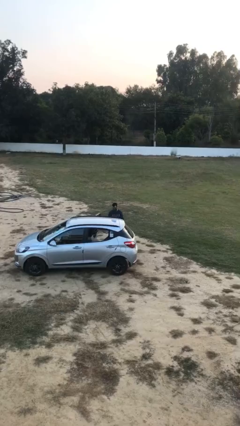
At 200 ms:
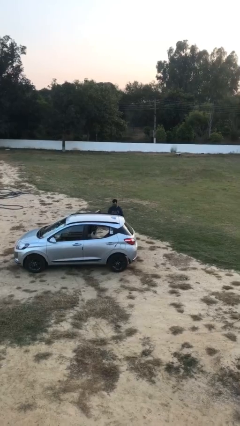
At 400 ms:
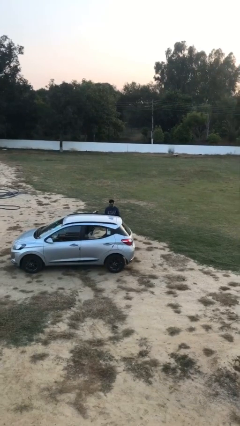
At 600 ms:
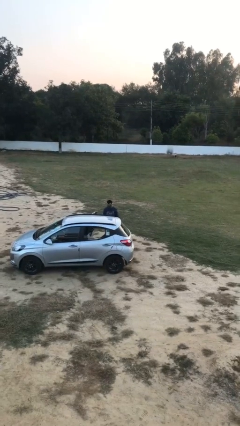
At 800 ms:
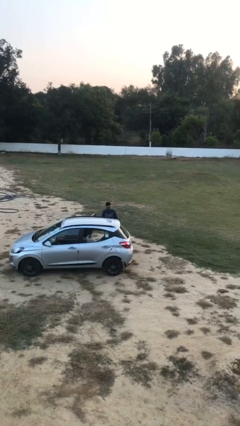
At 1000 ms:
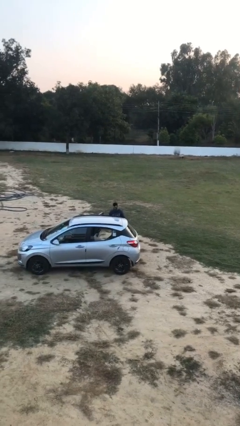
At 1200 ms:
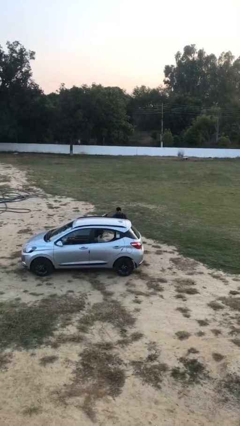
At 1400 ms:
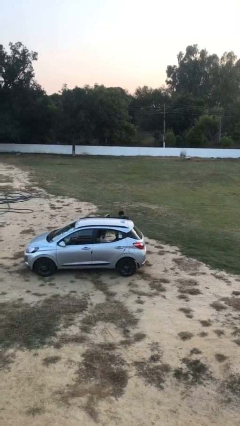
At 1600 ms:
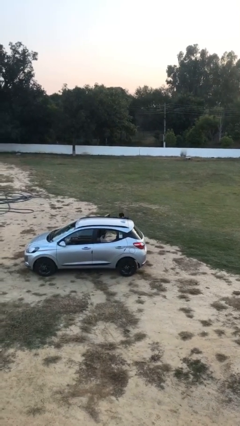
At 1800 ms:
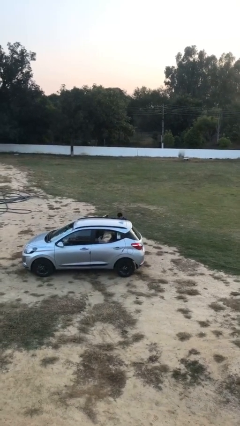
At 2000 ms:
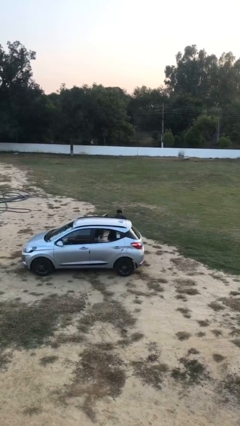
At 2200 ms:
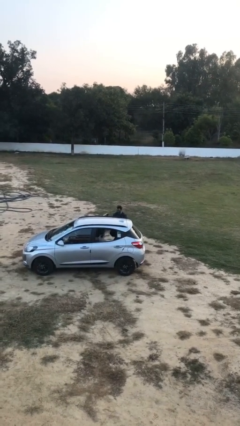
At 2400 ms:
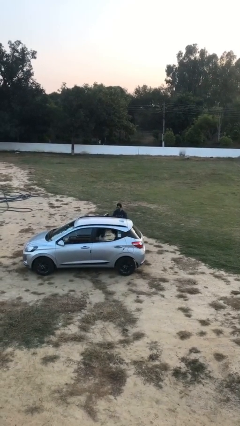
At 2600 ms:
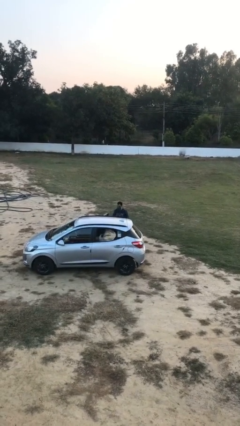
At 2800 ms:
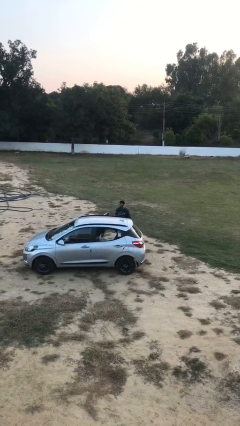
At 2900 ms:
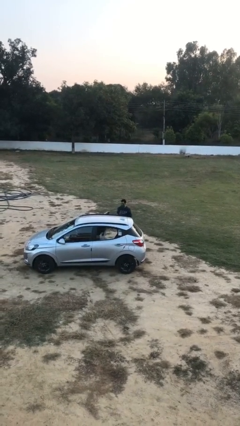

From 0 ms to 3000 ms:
person unloads car

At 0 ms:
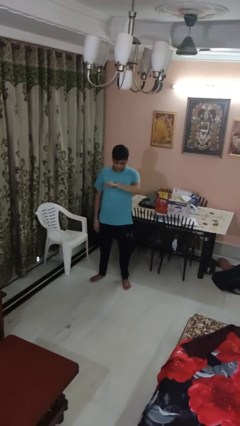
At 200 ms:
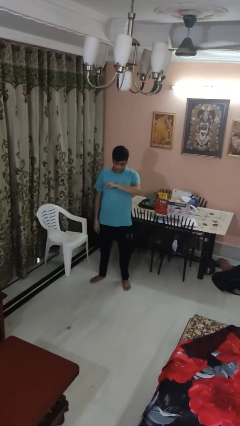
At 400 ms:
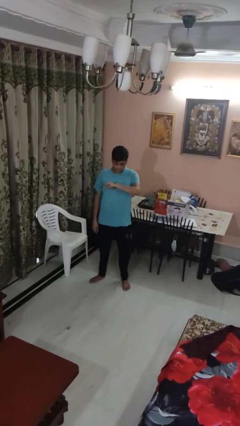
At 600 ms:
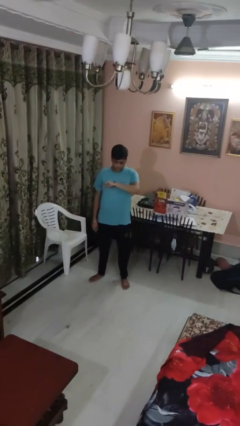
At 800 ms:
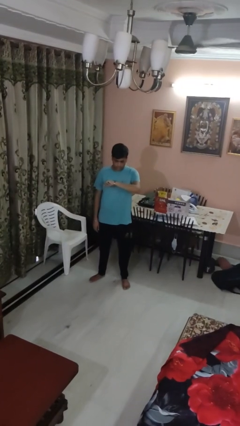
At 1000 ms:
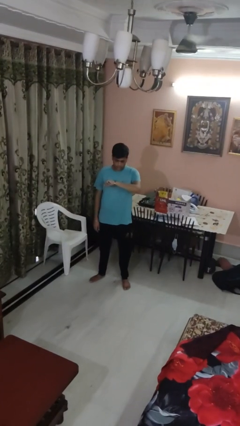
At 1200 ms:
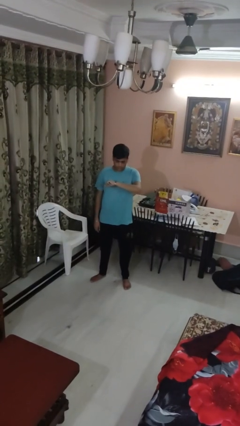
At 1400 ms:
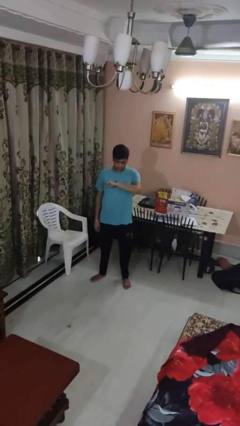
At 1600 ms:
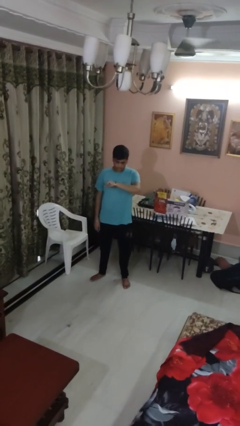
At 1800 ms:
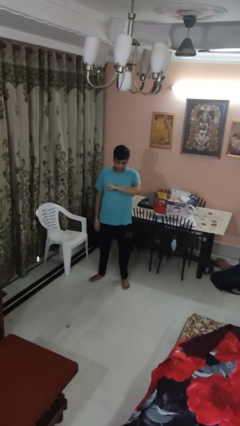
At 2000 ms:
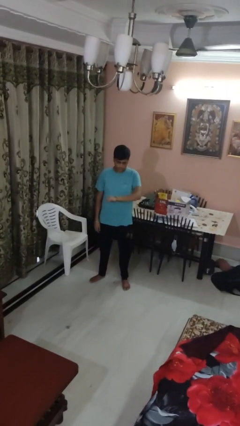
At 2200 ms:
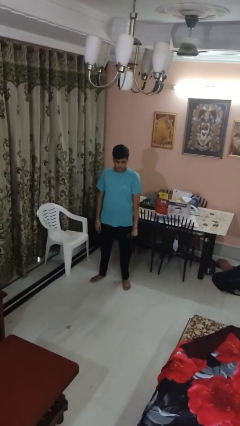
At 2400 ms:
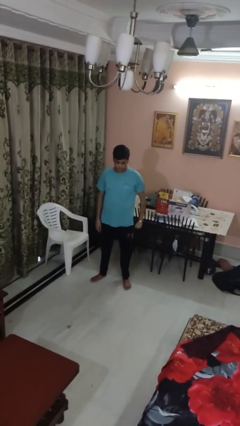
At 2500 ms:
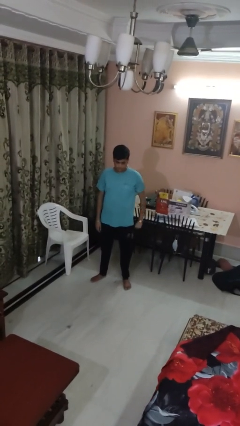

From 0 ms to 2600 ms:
person looks at wristwatch

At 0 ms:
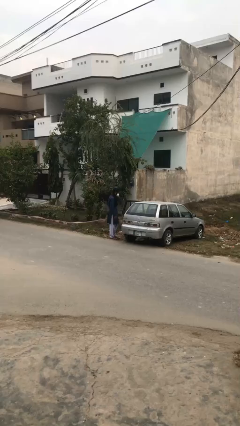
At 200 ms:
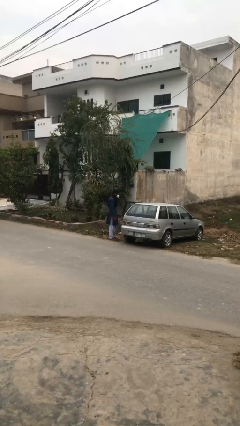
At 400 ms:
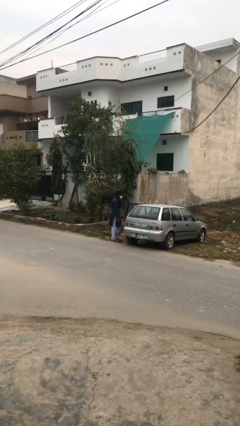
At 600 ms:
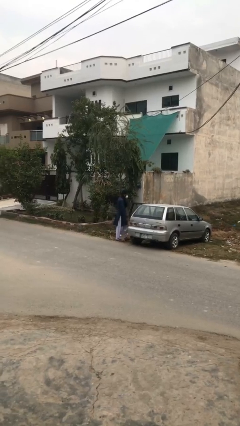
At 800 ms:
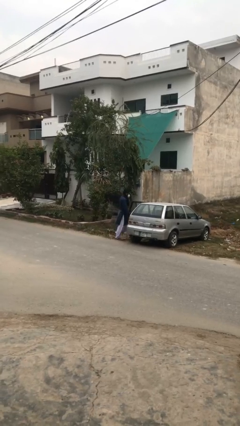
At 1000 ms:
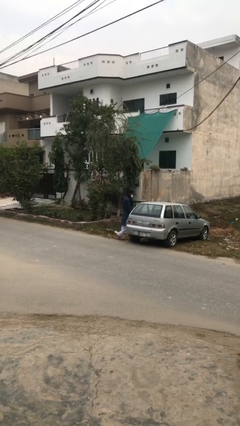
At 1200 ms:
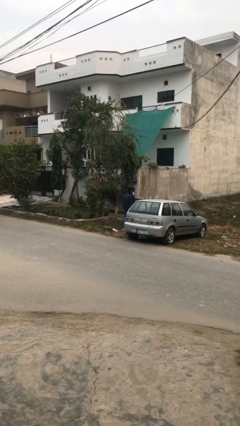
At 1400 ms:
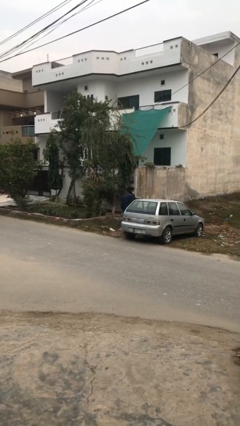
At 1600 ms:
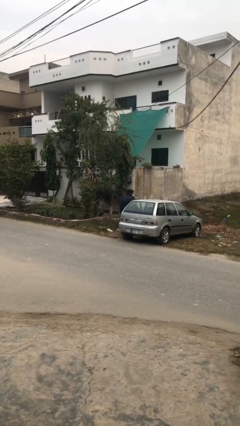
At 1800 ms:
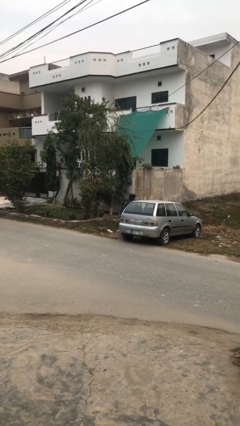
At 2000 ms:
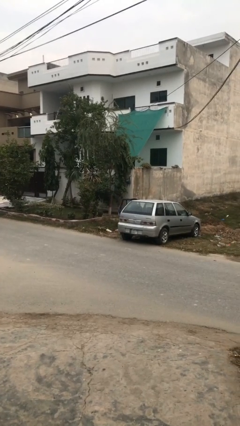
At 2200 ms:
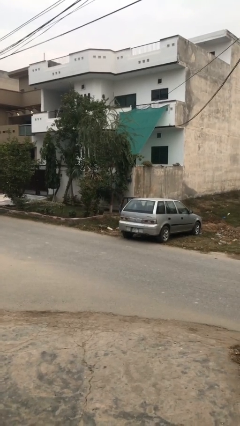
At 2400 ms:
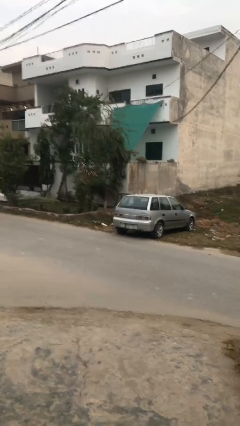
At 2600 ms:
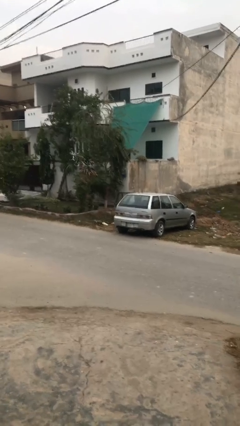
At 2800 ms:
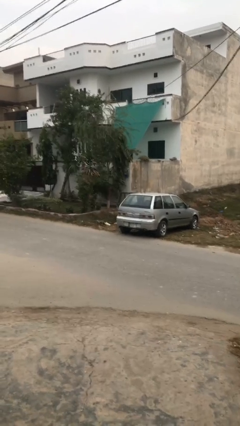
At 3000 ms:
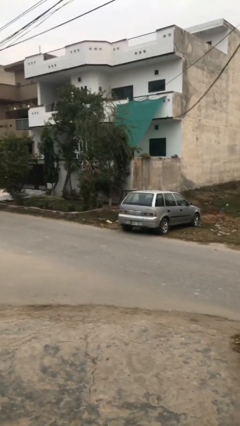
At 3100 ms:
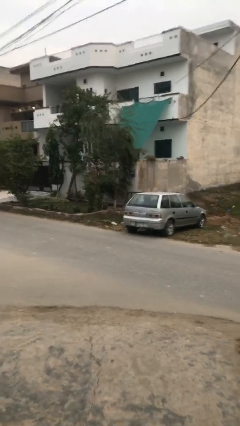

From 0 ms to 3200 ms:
person enters car

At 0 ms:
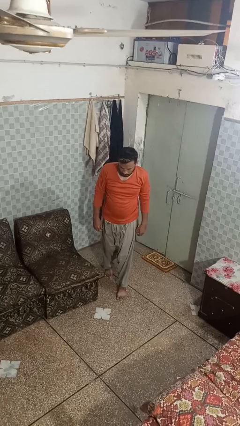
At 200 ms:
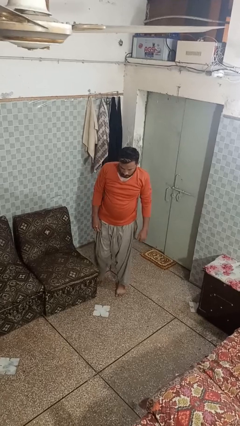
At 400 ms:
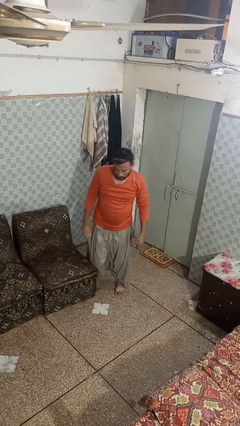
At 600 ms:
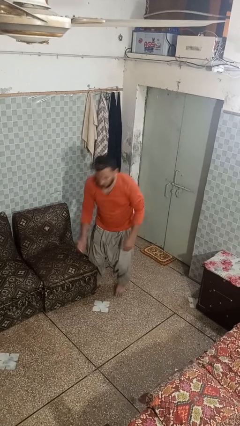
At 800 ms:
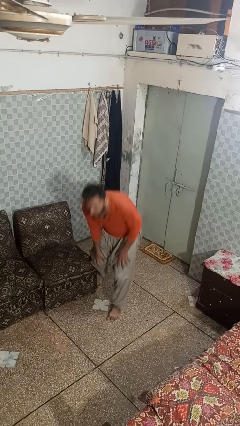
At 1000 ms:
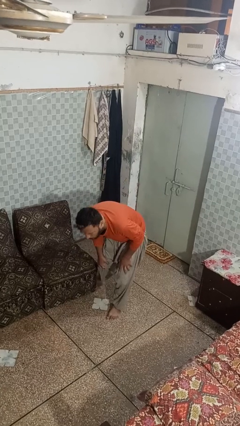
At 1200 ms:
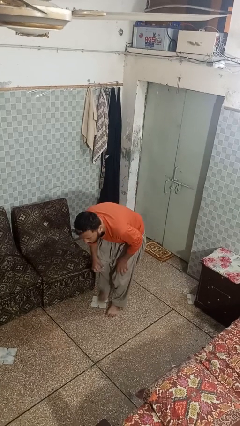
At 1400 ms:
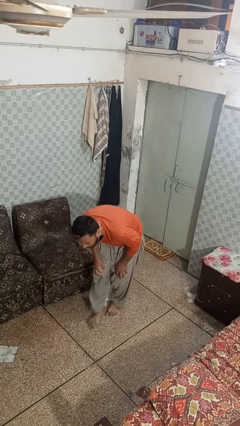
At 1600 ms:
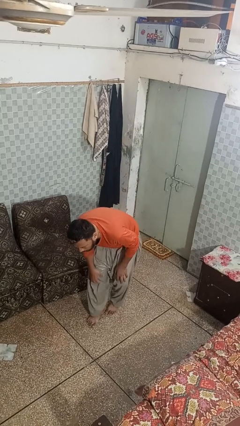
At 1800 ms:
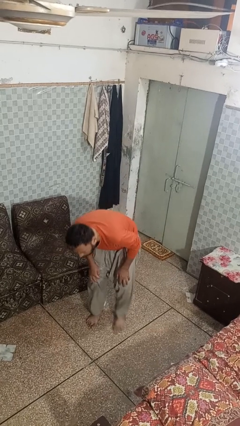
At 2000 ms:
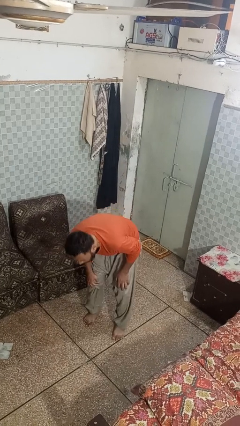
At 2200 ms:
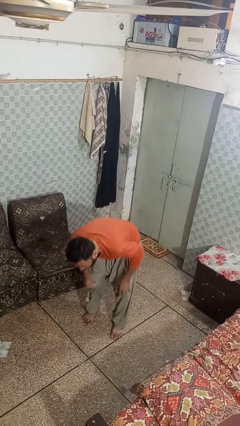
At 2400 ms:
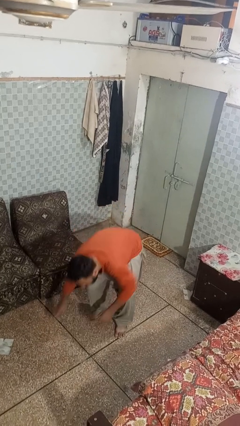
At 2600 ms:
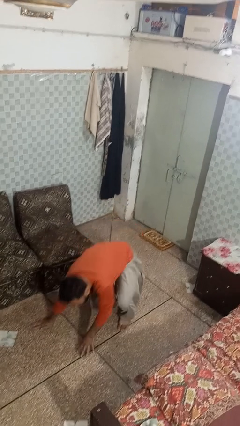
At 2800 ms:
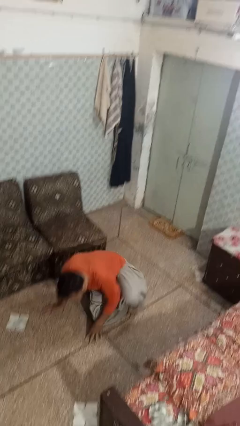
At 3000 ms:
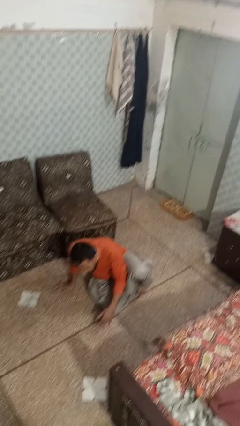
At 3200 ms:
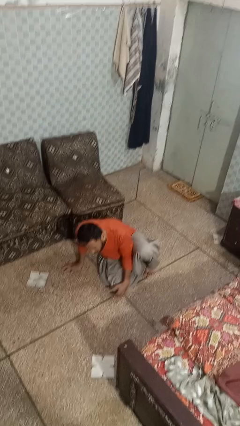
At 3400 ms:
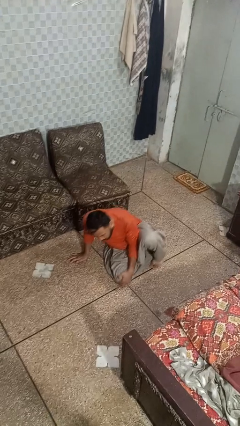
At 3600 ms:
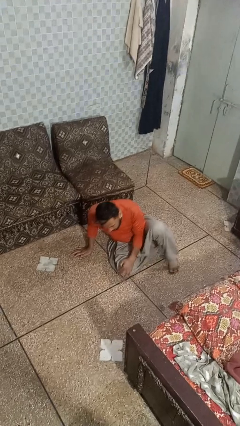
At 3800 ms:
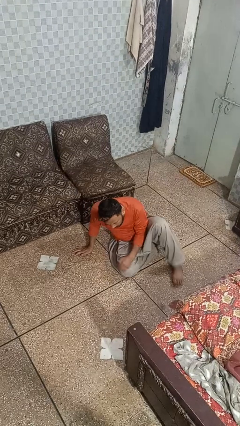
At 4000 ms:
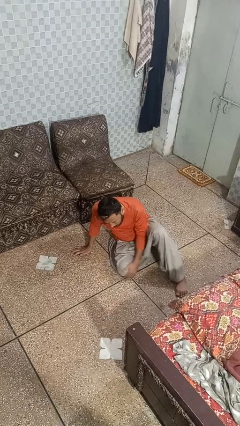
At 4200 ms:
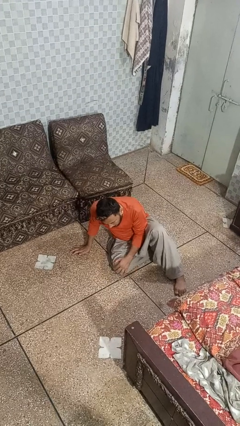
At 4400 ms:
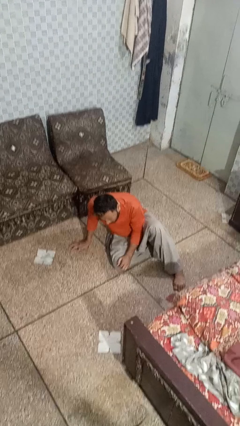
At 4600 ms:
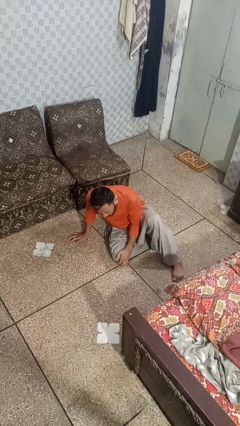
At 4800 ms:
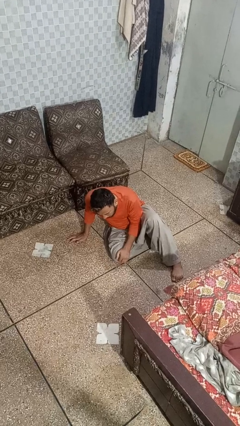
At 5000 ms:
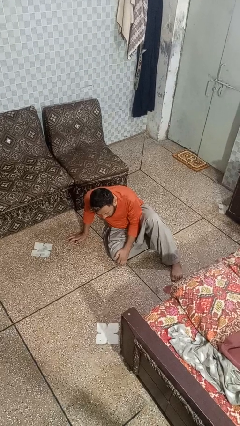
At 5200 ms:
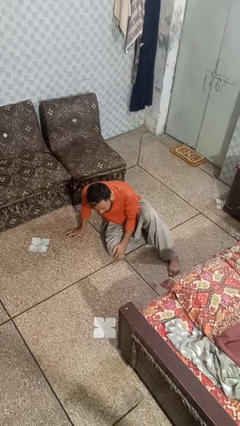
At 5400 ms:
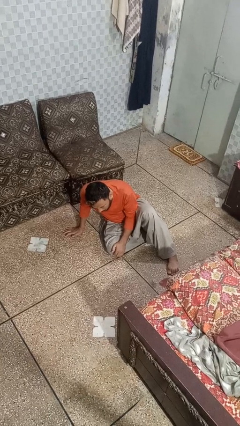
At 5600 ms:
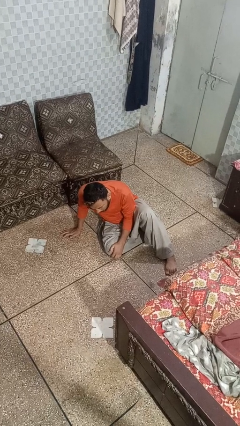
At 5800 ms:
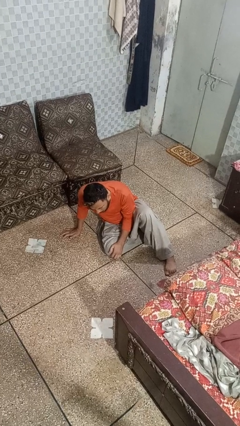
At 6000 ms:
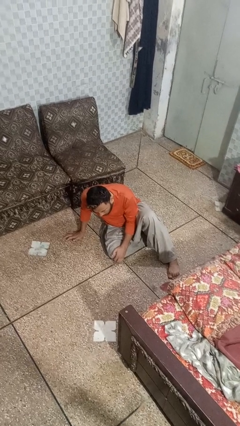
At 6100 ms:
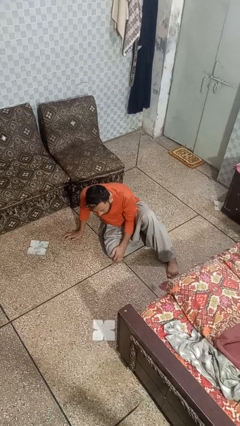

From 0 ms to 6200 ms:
person trips on object on floor

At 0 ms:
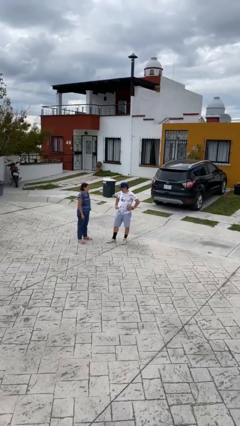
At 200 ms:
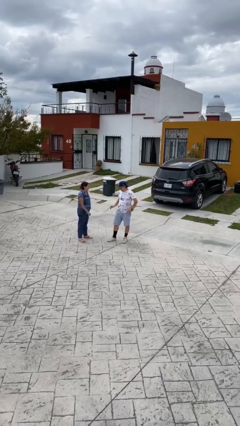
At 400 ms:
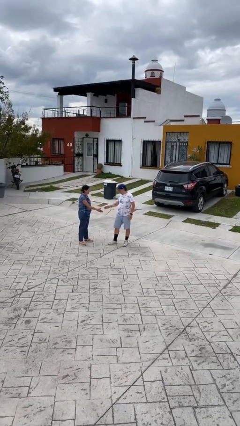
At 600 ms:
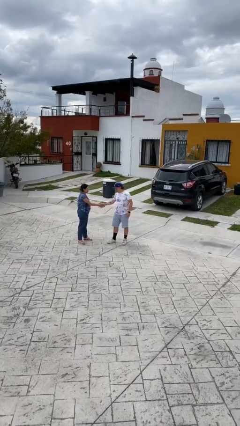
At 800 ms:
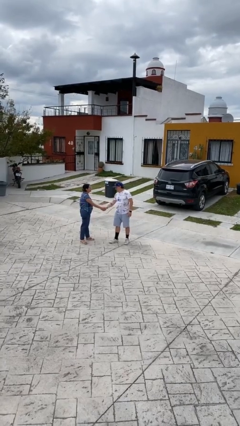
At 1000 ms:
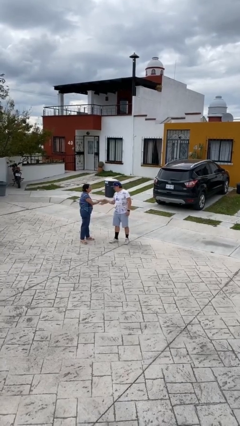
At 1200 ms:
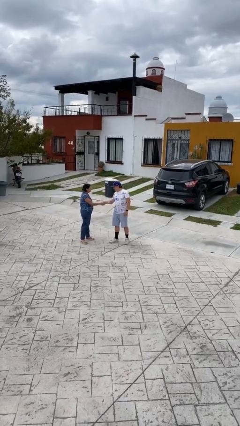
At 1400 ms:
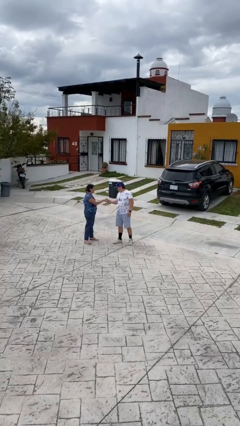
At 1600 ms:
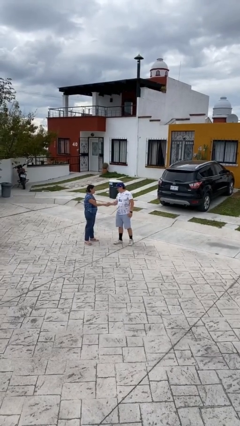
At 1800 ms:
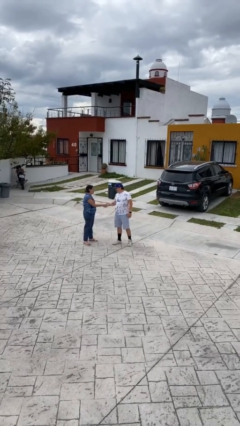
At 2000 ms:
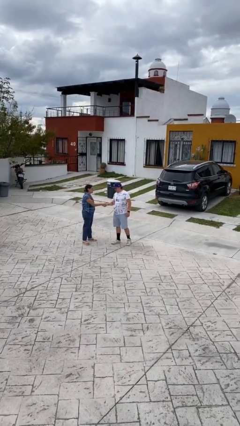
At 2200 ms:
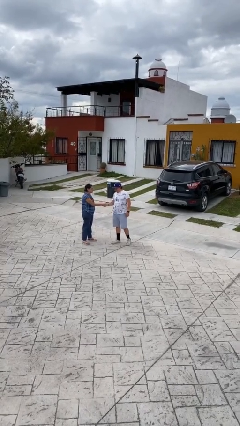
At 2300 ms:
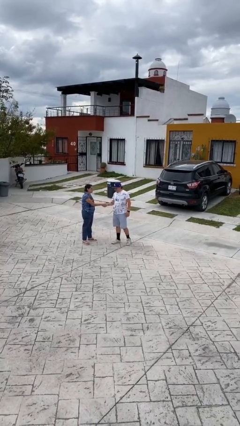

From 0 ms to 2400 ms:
person shakes hand
